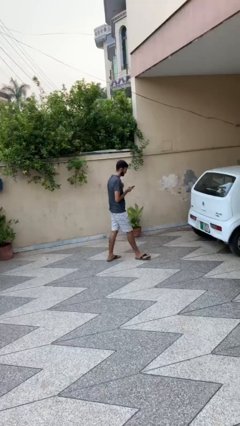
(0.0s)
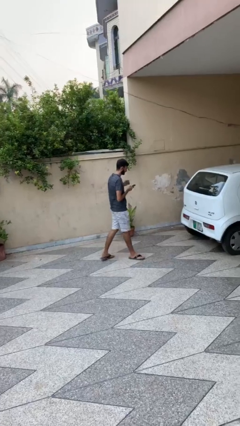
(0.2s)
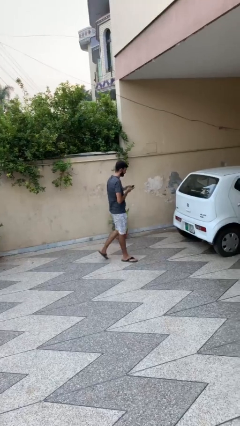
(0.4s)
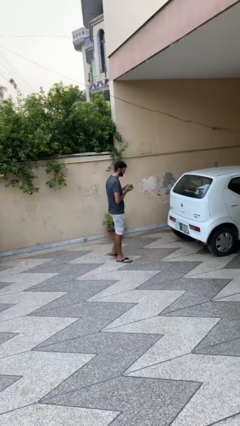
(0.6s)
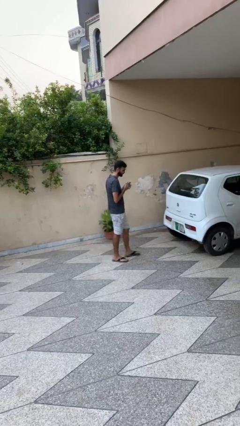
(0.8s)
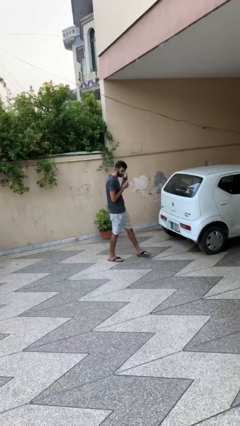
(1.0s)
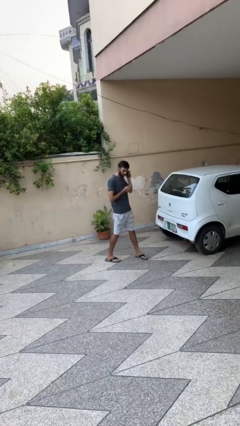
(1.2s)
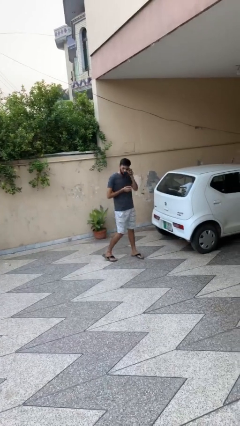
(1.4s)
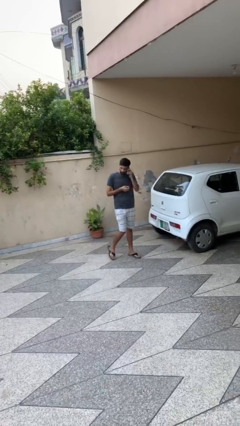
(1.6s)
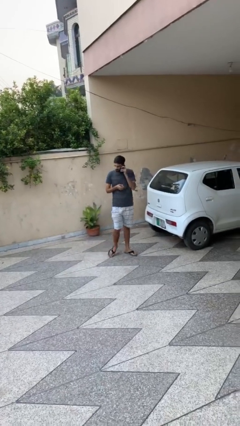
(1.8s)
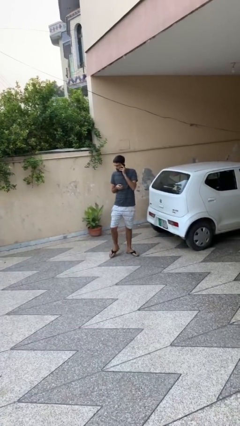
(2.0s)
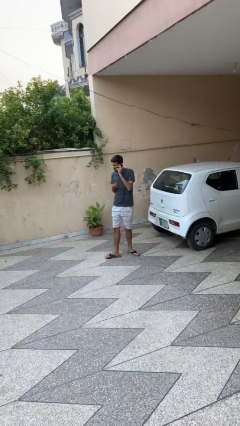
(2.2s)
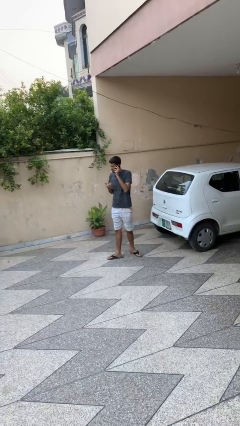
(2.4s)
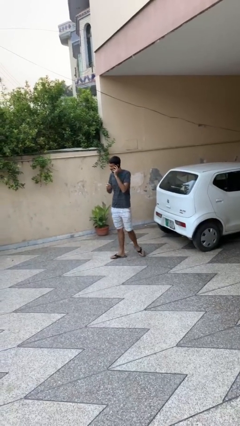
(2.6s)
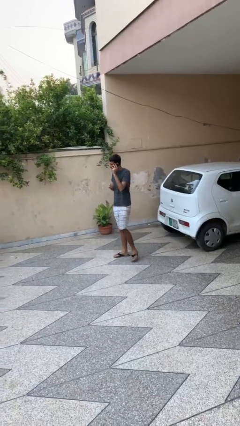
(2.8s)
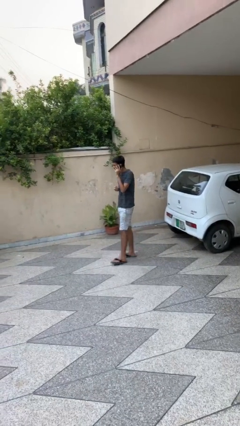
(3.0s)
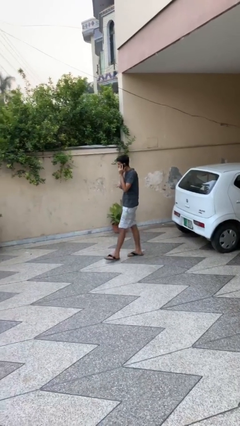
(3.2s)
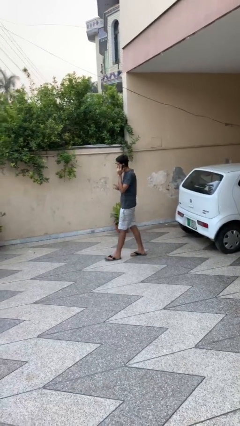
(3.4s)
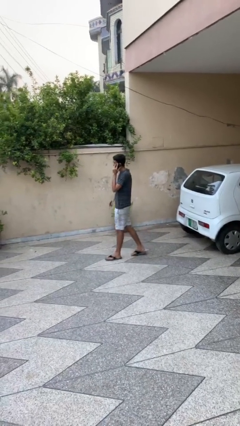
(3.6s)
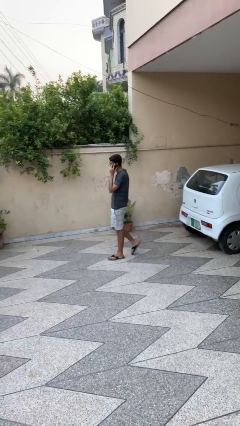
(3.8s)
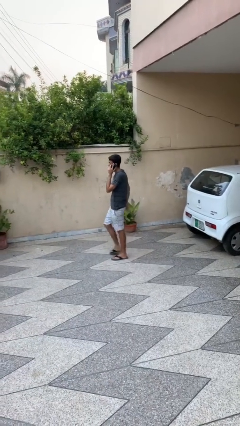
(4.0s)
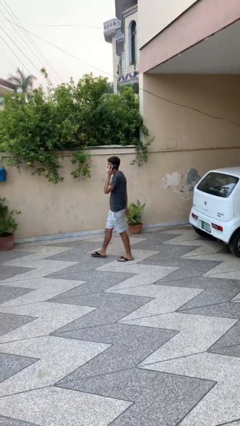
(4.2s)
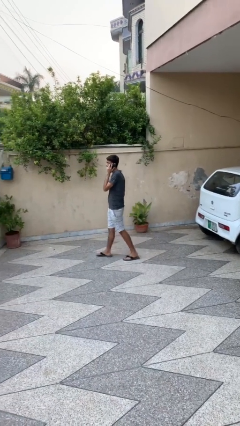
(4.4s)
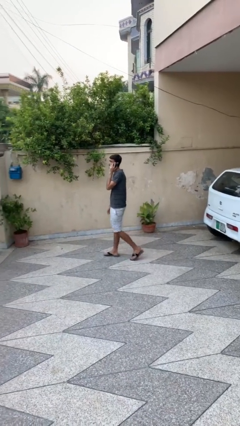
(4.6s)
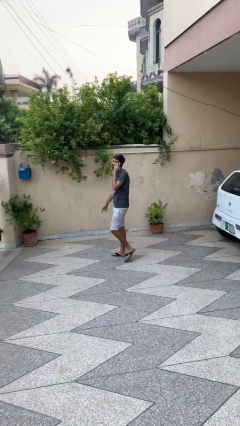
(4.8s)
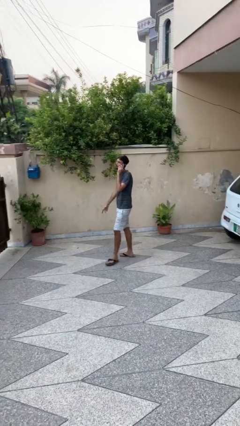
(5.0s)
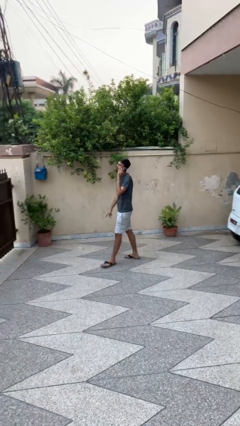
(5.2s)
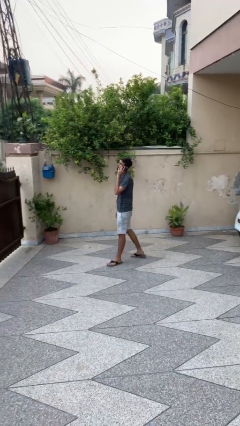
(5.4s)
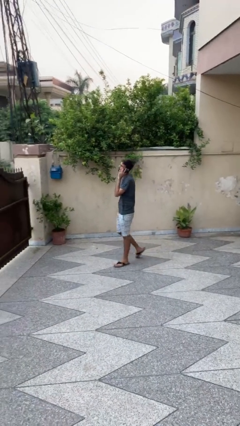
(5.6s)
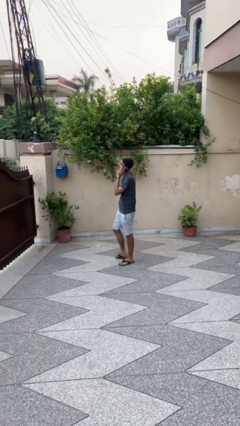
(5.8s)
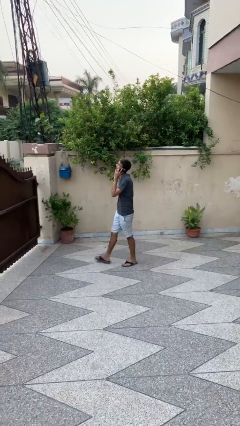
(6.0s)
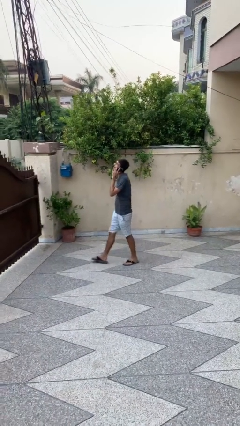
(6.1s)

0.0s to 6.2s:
person talks on phone

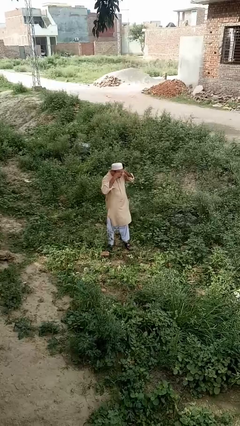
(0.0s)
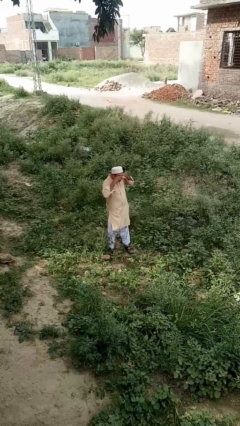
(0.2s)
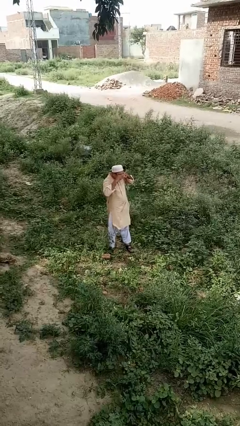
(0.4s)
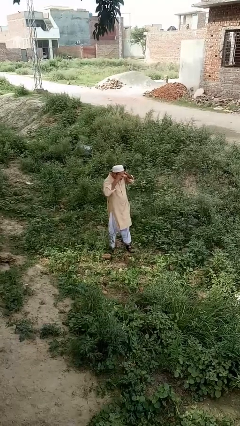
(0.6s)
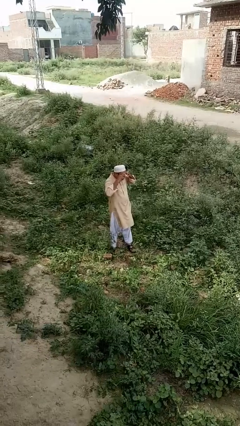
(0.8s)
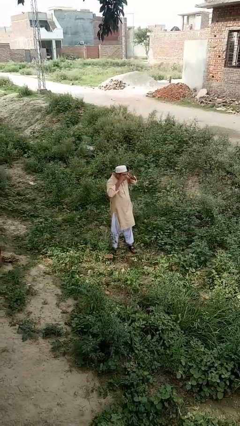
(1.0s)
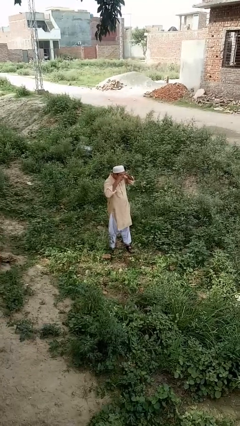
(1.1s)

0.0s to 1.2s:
person rubs eyes

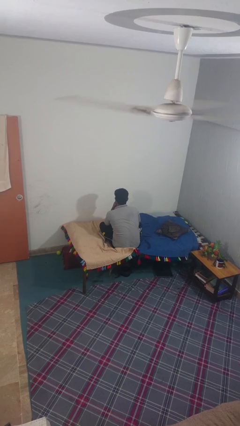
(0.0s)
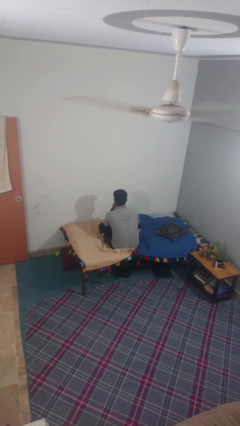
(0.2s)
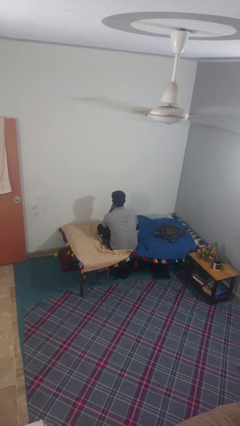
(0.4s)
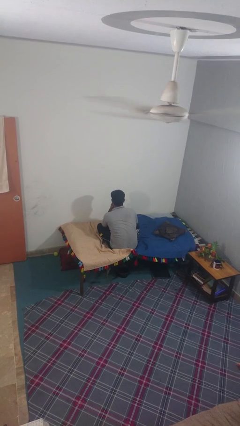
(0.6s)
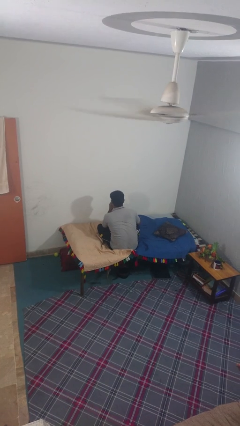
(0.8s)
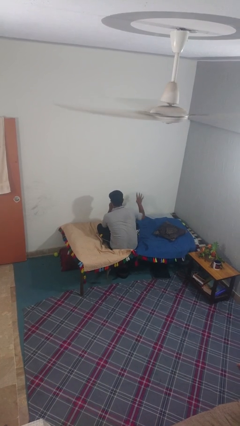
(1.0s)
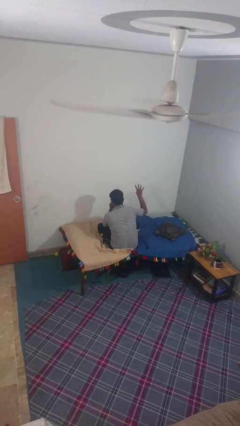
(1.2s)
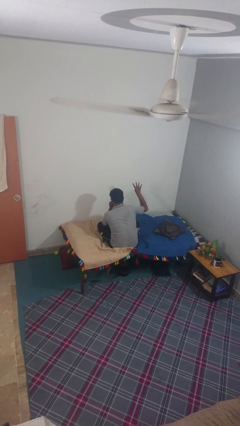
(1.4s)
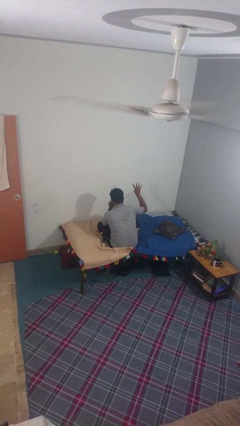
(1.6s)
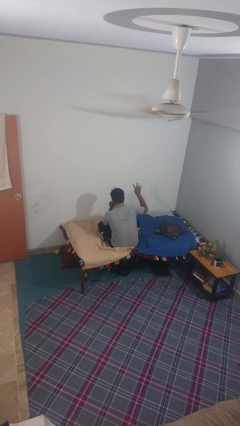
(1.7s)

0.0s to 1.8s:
person gestures number four

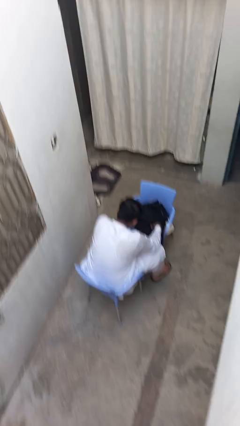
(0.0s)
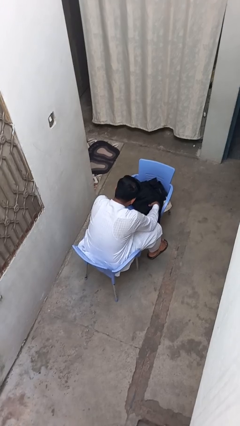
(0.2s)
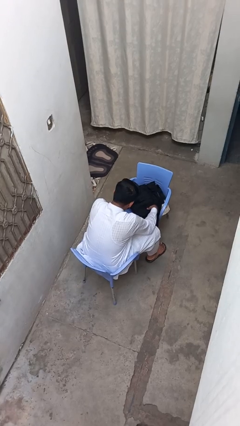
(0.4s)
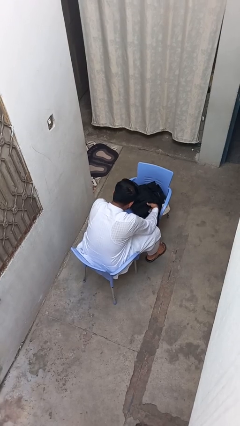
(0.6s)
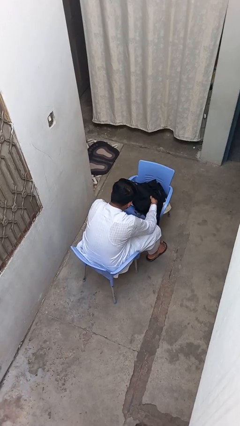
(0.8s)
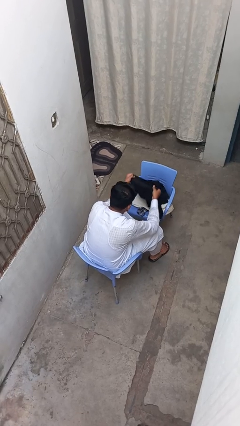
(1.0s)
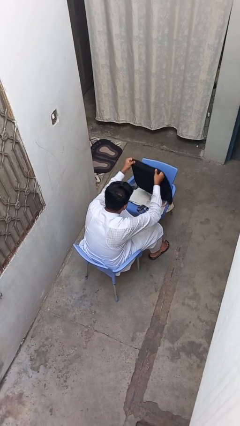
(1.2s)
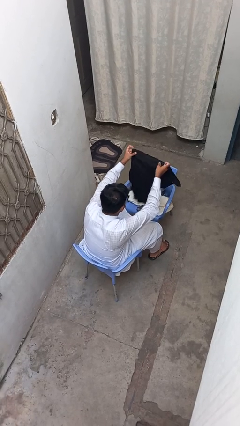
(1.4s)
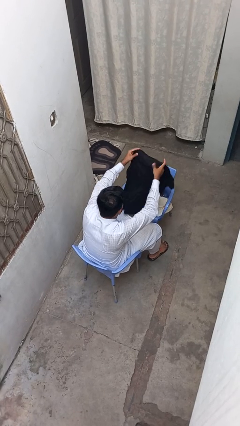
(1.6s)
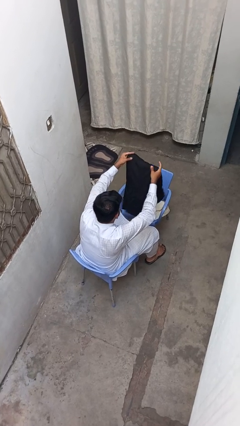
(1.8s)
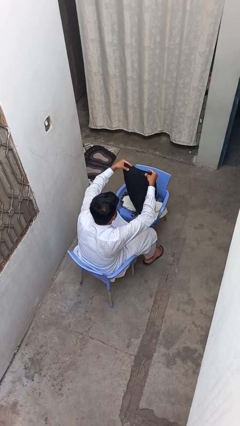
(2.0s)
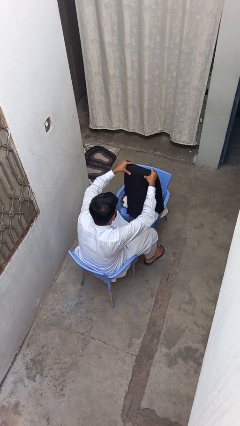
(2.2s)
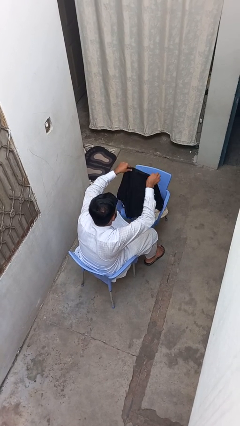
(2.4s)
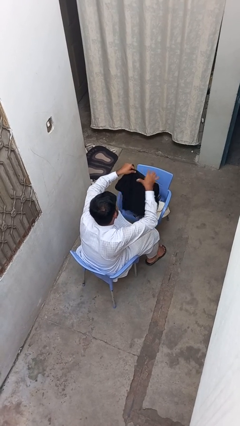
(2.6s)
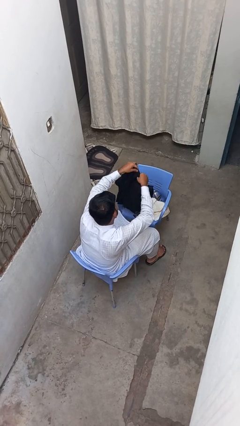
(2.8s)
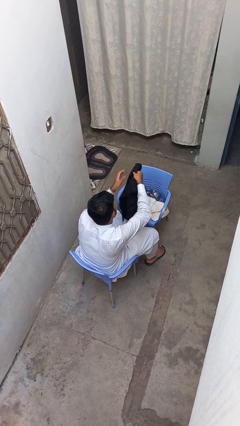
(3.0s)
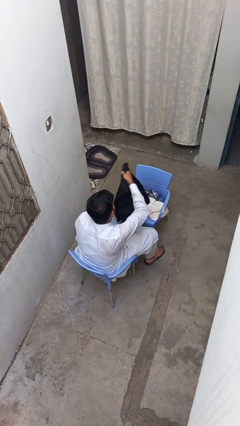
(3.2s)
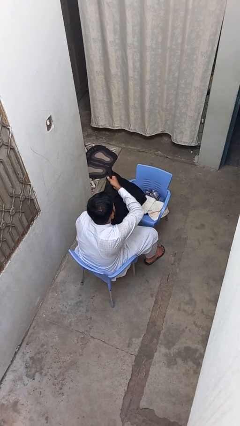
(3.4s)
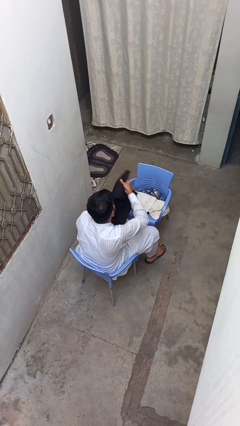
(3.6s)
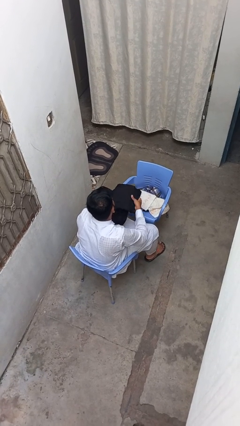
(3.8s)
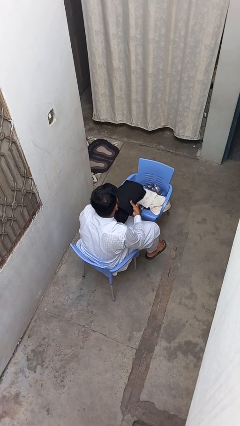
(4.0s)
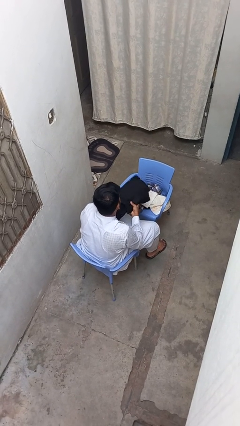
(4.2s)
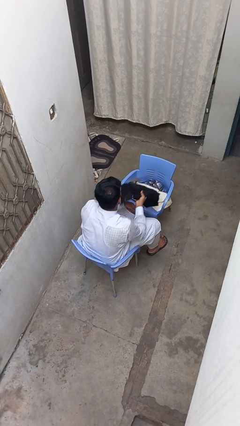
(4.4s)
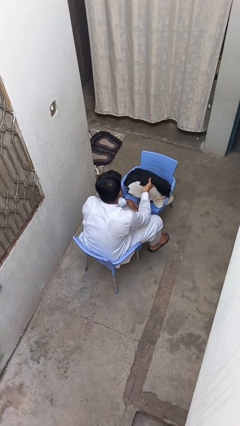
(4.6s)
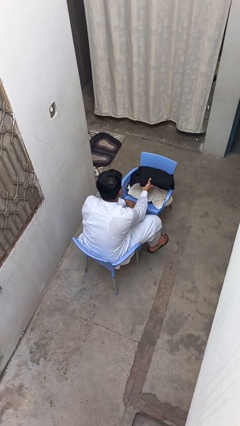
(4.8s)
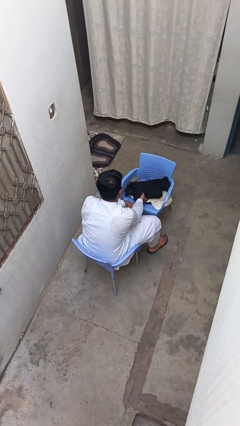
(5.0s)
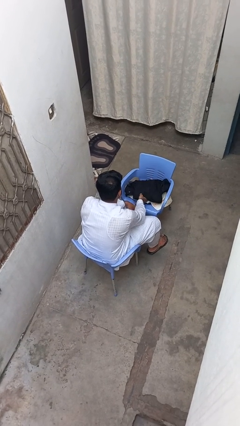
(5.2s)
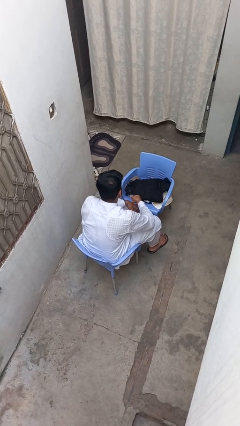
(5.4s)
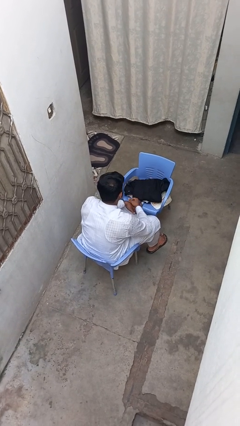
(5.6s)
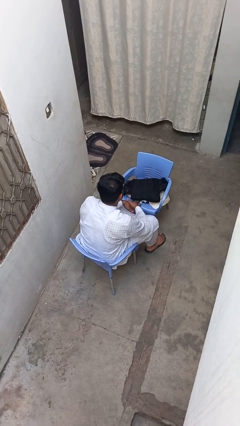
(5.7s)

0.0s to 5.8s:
person folds pants

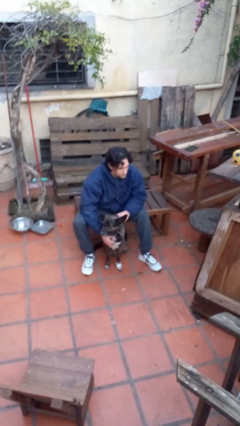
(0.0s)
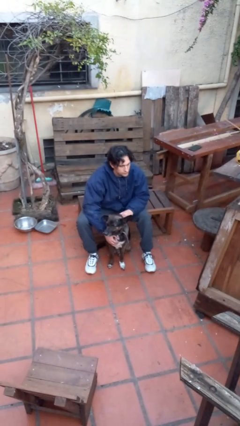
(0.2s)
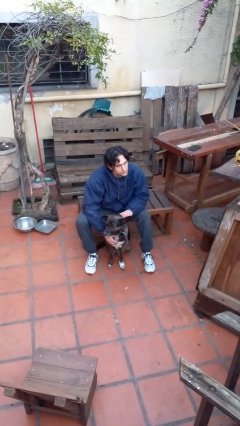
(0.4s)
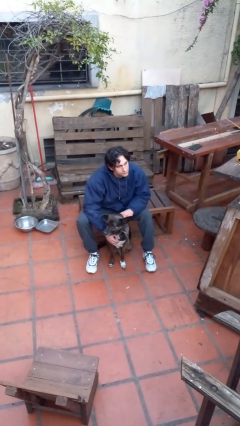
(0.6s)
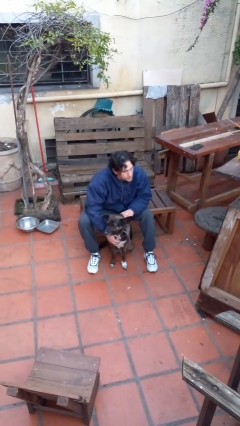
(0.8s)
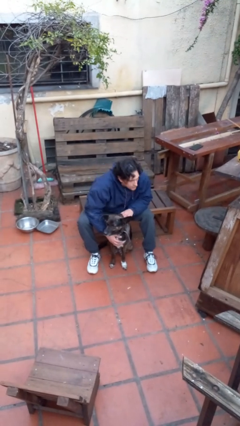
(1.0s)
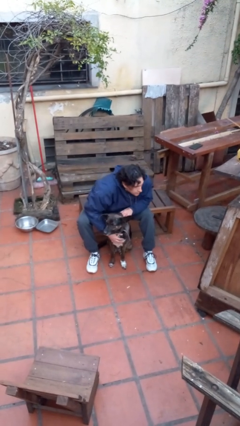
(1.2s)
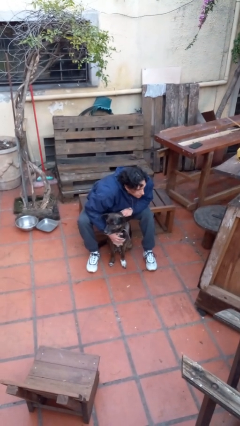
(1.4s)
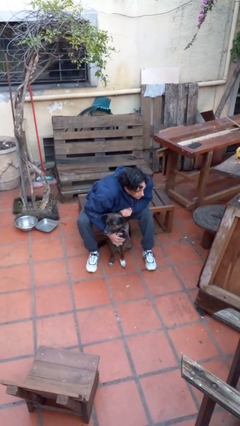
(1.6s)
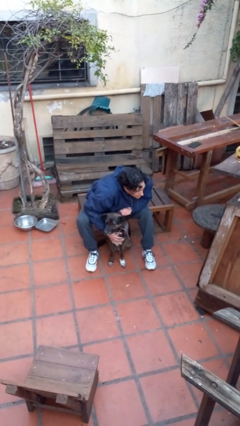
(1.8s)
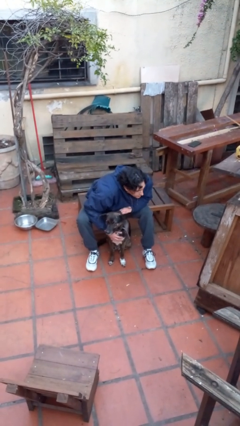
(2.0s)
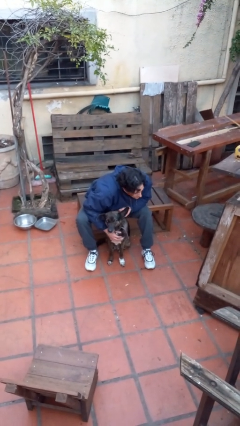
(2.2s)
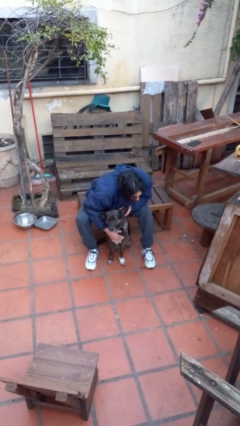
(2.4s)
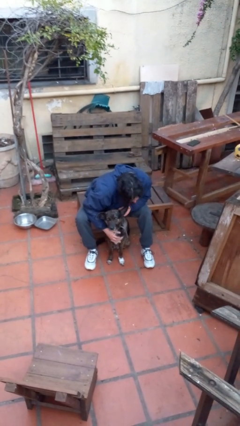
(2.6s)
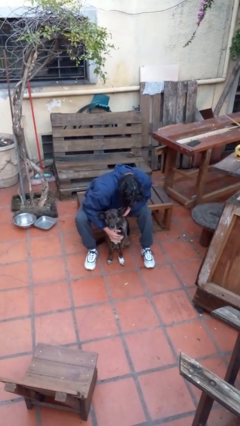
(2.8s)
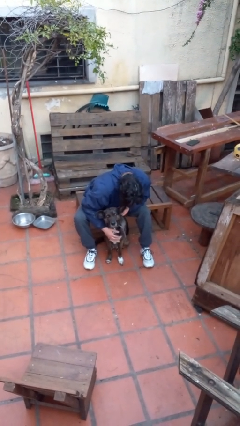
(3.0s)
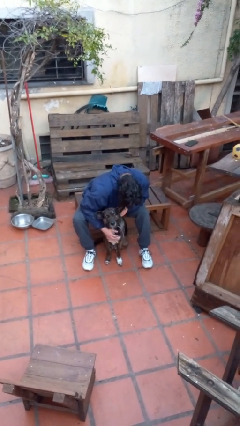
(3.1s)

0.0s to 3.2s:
person hugs dog
